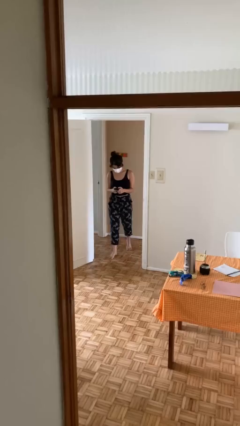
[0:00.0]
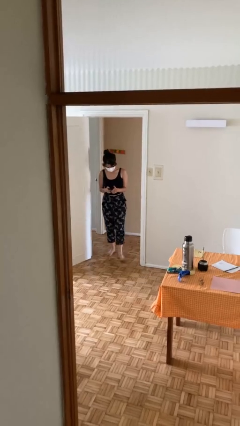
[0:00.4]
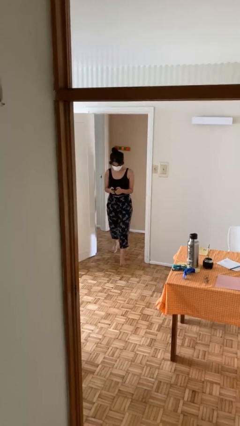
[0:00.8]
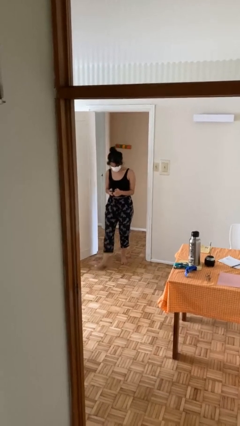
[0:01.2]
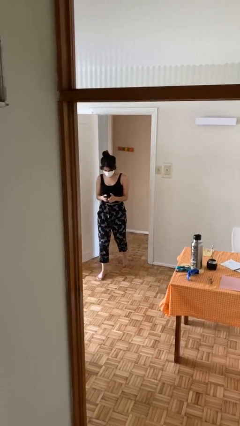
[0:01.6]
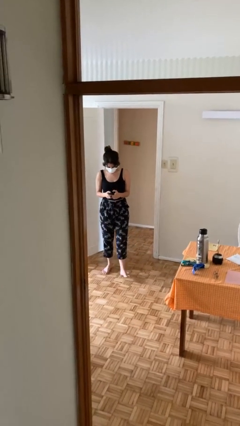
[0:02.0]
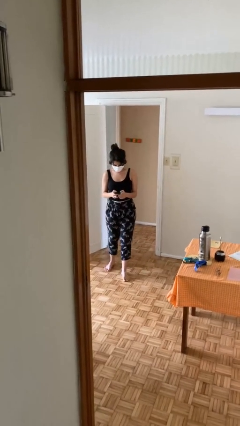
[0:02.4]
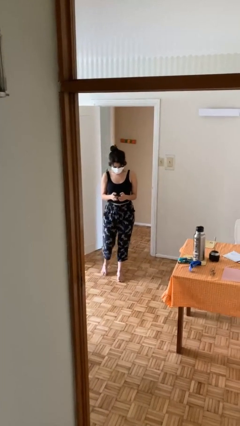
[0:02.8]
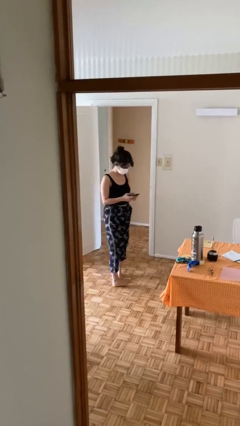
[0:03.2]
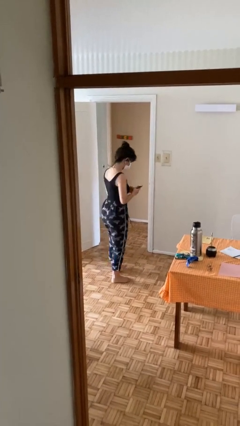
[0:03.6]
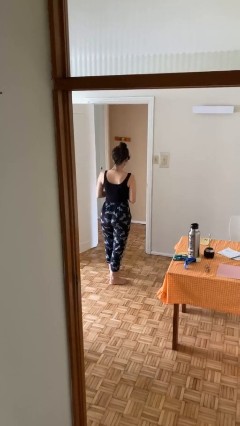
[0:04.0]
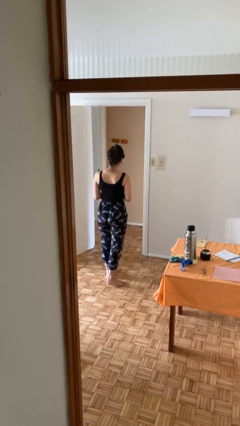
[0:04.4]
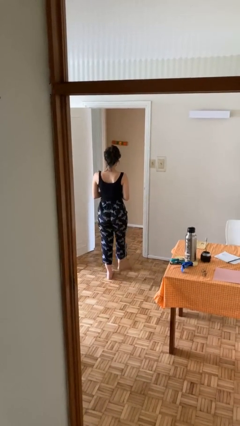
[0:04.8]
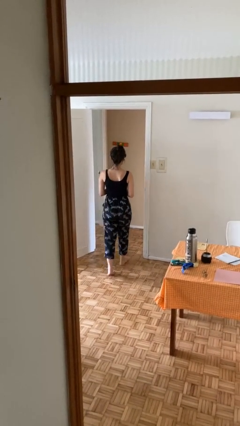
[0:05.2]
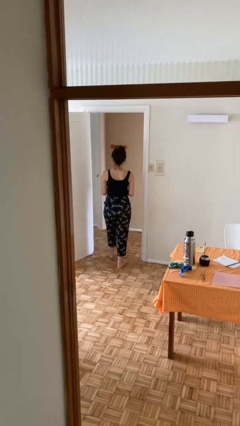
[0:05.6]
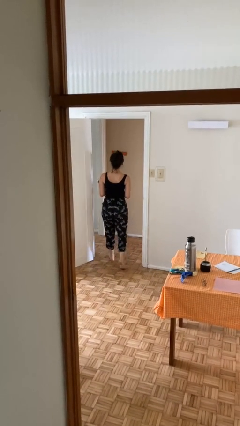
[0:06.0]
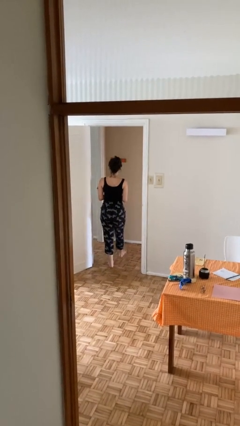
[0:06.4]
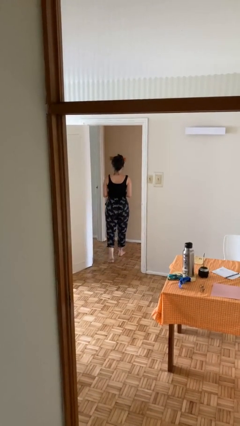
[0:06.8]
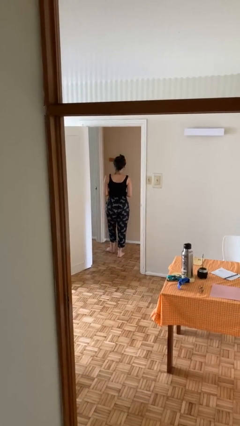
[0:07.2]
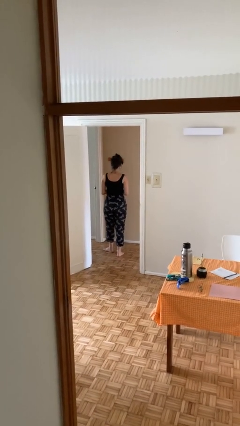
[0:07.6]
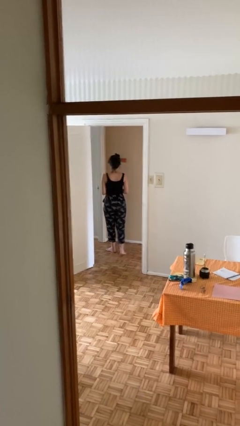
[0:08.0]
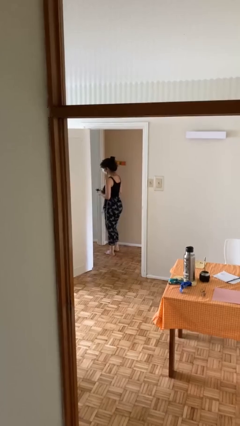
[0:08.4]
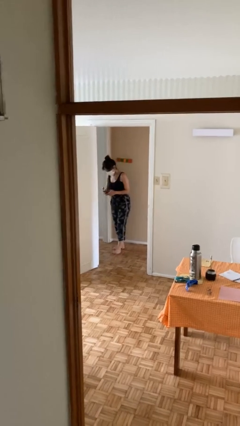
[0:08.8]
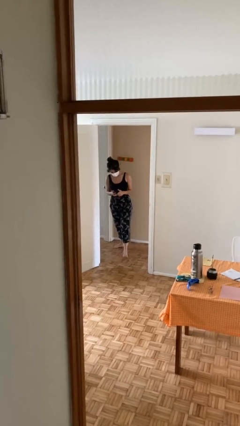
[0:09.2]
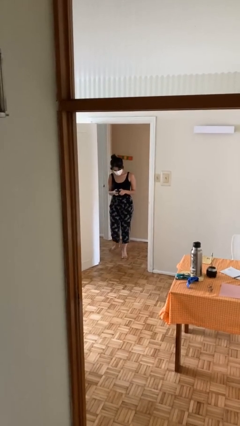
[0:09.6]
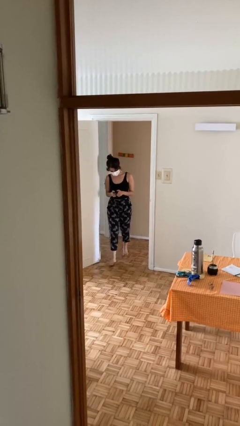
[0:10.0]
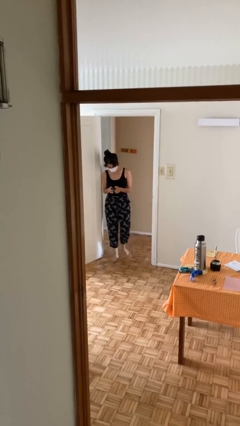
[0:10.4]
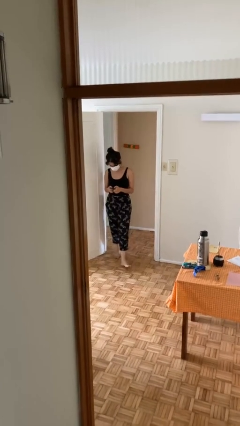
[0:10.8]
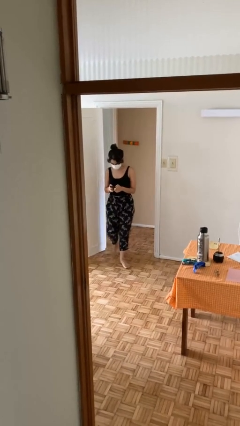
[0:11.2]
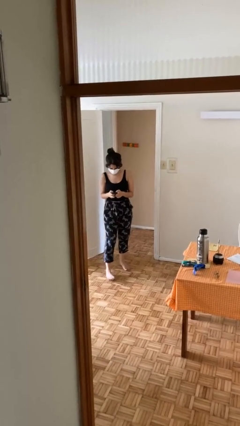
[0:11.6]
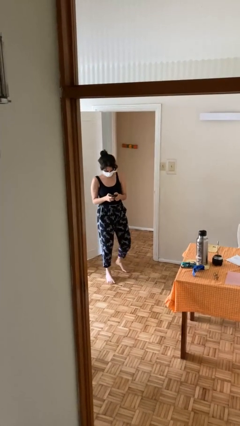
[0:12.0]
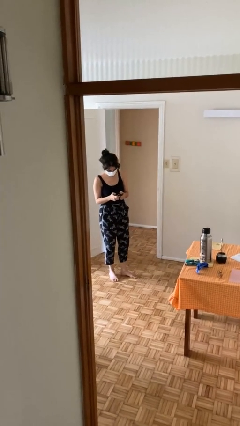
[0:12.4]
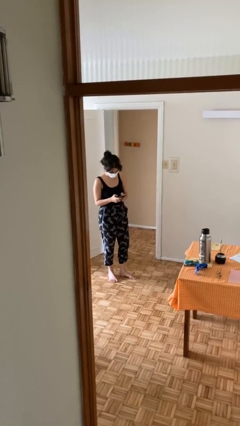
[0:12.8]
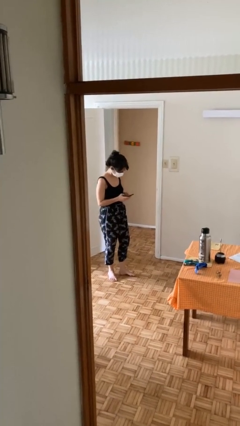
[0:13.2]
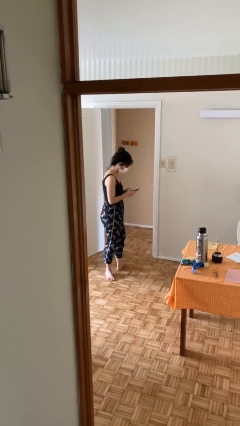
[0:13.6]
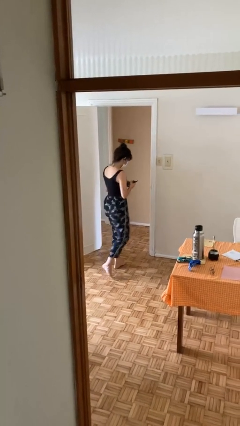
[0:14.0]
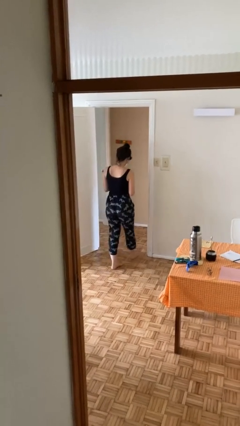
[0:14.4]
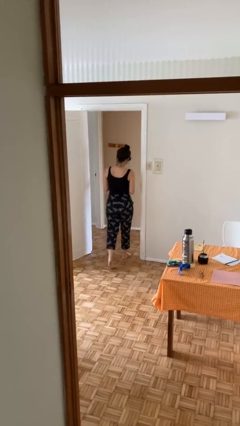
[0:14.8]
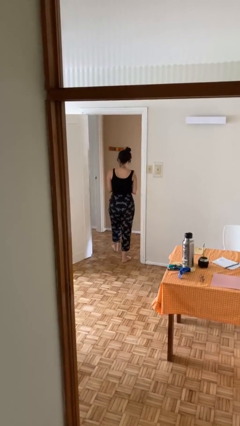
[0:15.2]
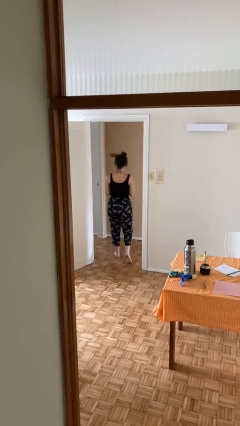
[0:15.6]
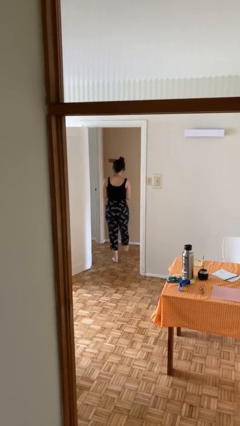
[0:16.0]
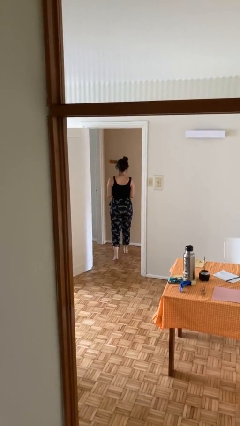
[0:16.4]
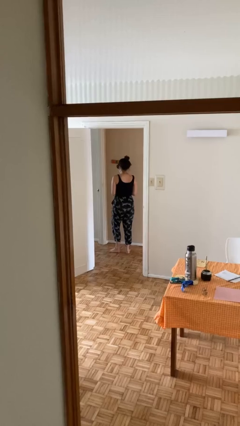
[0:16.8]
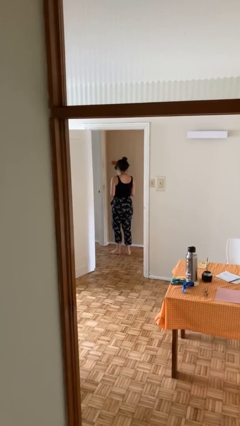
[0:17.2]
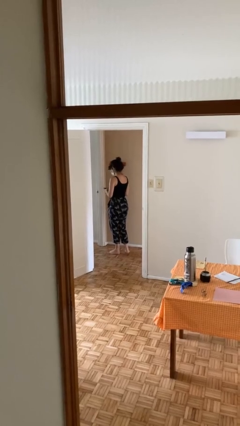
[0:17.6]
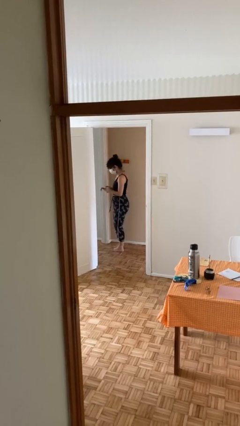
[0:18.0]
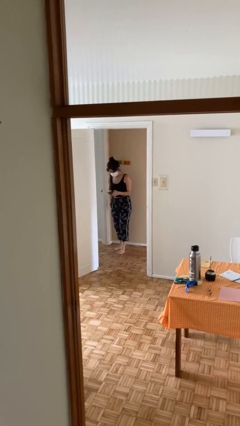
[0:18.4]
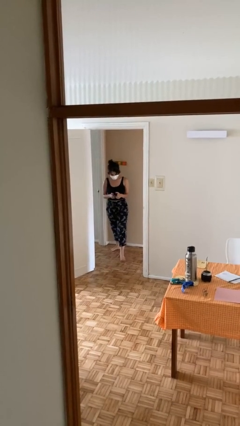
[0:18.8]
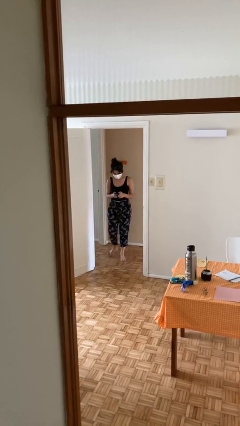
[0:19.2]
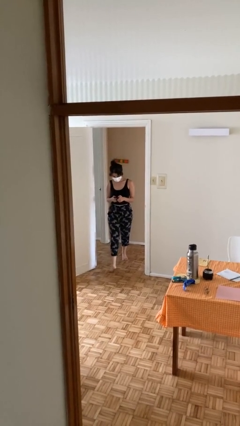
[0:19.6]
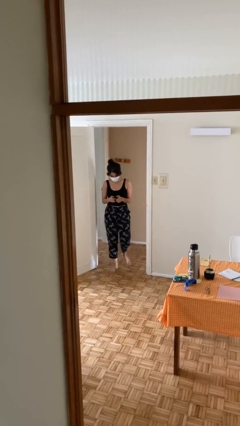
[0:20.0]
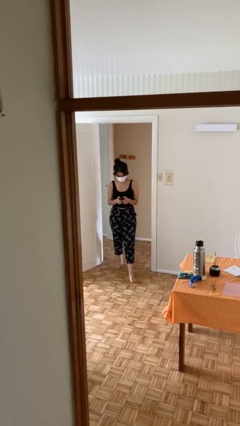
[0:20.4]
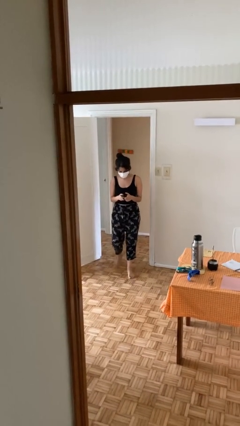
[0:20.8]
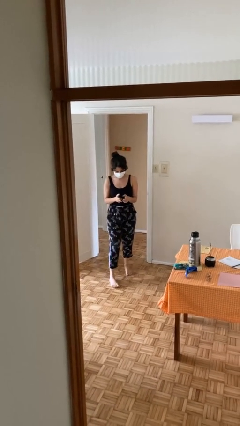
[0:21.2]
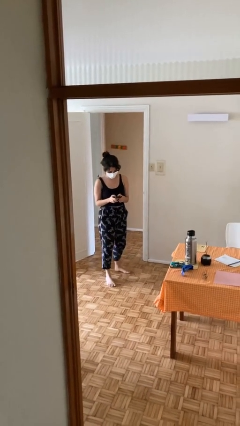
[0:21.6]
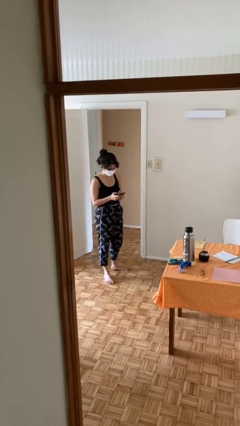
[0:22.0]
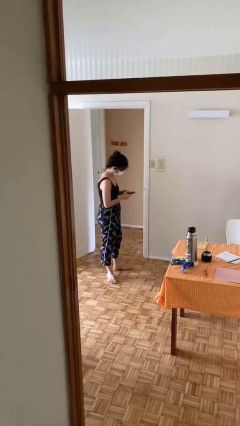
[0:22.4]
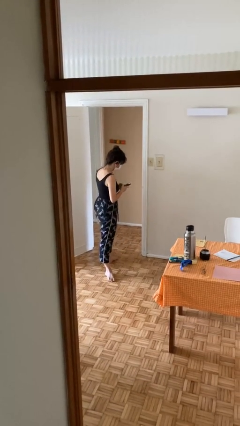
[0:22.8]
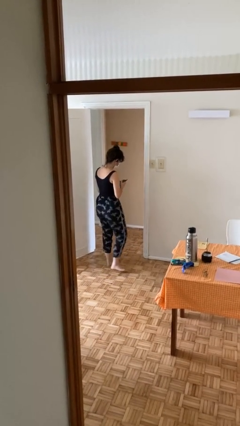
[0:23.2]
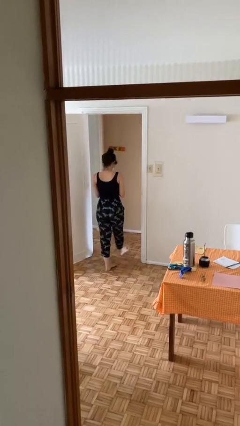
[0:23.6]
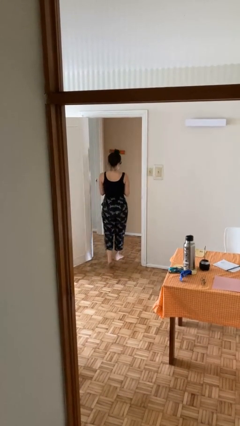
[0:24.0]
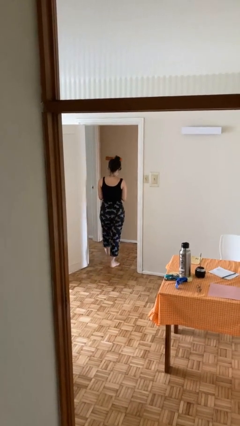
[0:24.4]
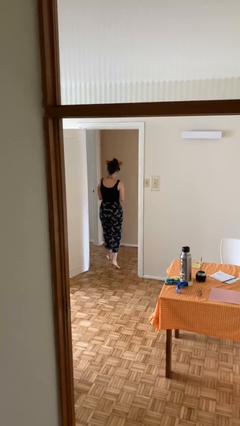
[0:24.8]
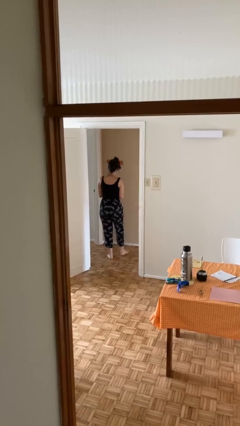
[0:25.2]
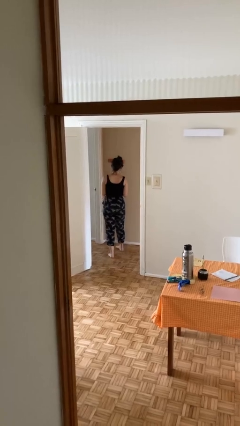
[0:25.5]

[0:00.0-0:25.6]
person texts on phone

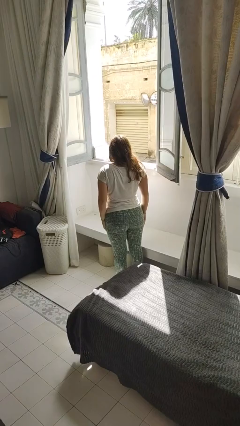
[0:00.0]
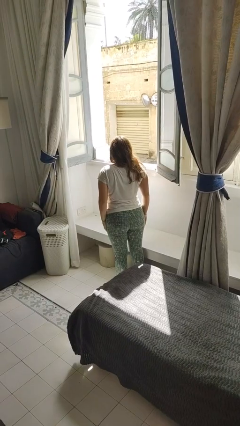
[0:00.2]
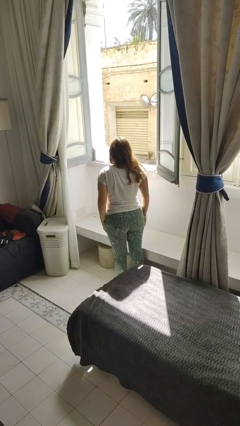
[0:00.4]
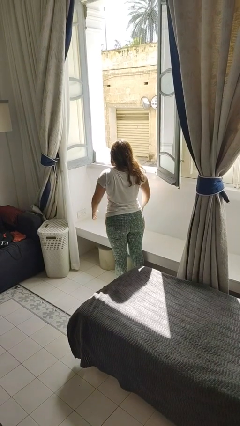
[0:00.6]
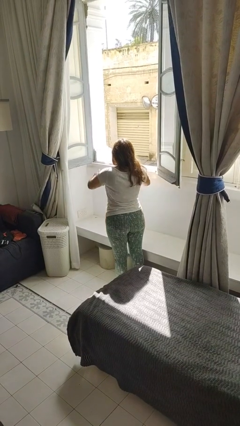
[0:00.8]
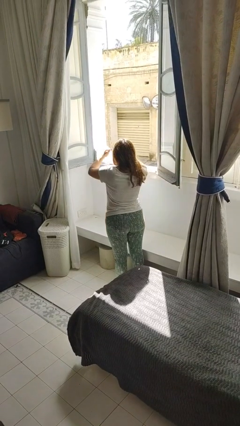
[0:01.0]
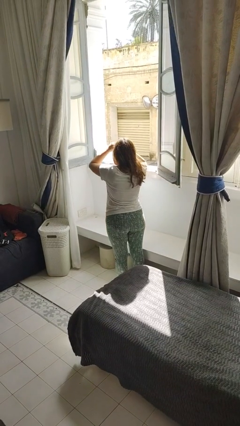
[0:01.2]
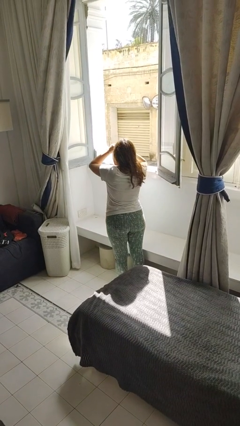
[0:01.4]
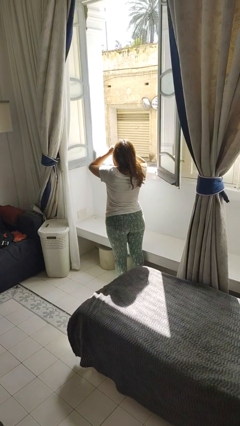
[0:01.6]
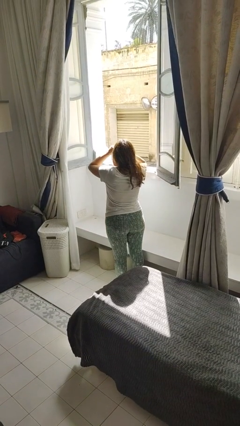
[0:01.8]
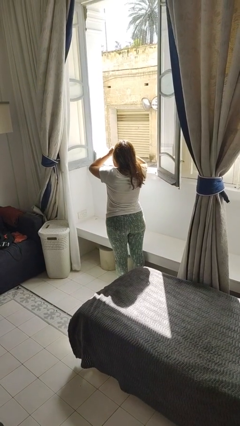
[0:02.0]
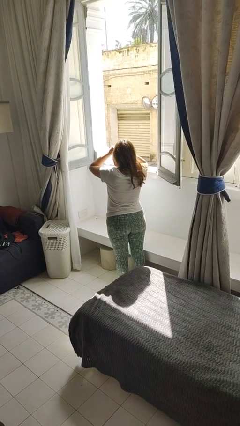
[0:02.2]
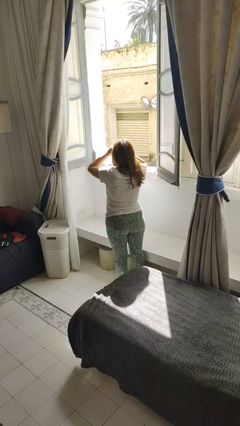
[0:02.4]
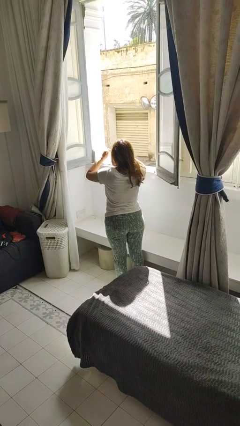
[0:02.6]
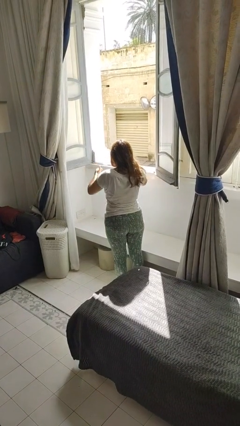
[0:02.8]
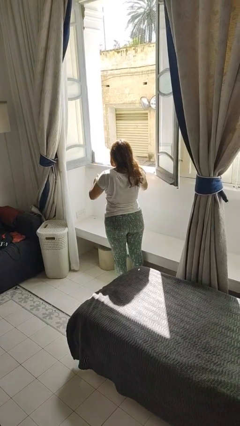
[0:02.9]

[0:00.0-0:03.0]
person shades eyes

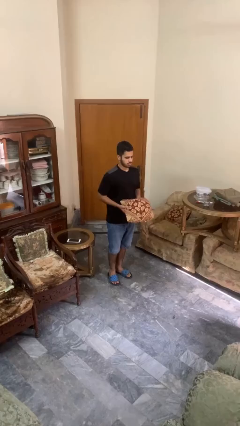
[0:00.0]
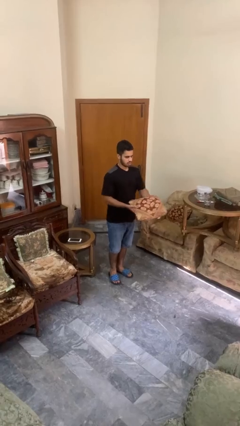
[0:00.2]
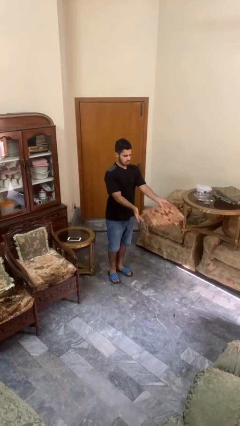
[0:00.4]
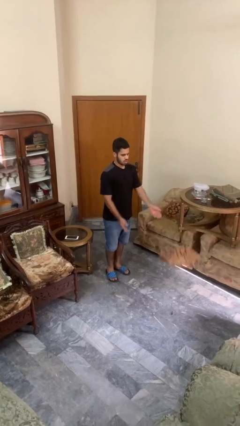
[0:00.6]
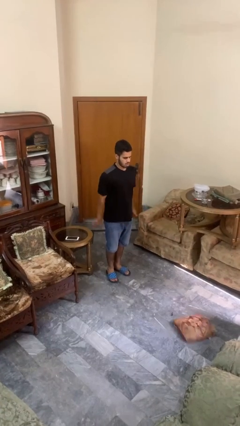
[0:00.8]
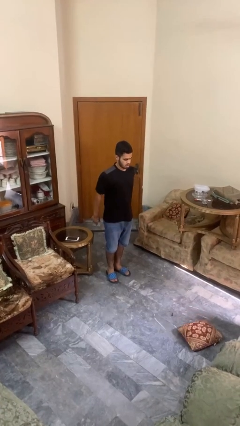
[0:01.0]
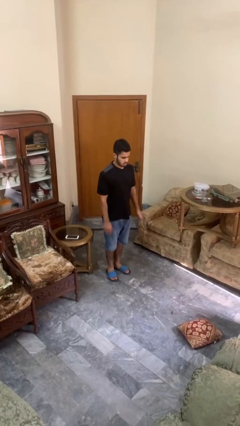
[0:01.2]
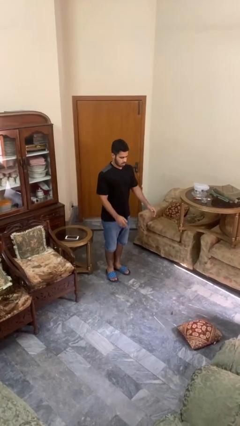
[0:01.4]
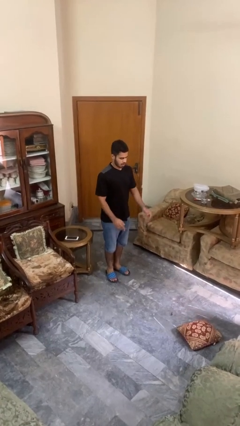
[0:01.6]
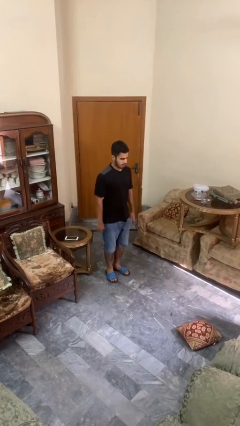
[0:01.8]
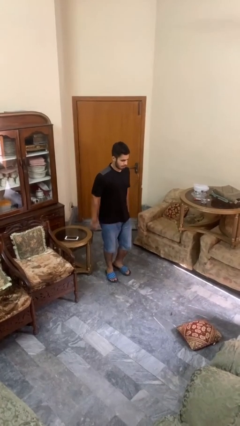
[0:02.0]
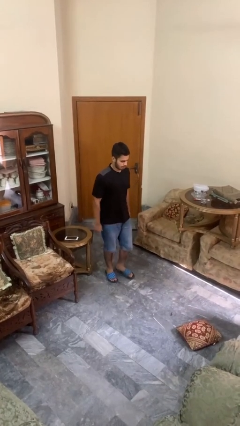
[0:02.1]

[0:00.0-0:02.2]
person throws object to ground
